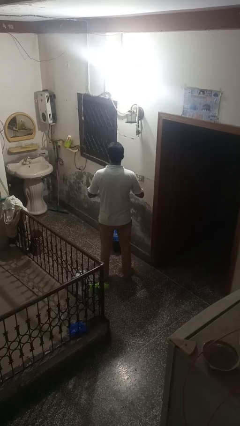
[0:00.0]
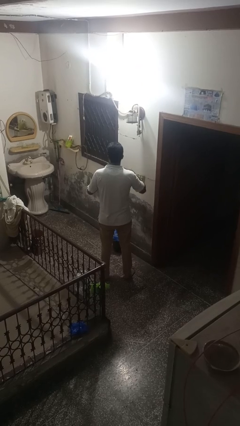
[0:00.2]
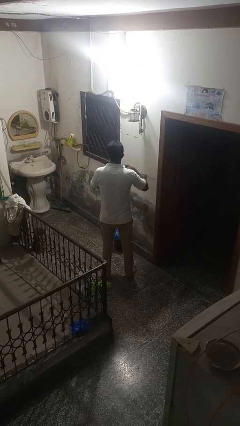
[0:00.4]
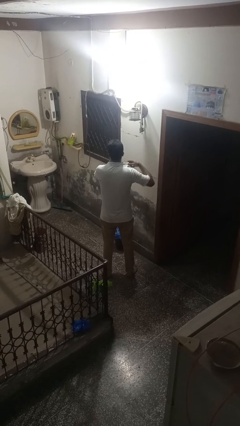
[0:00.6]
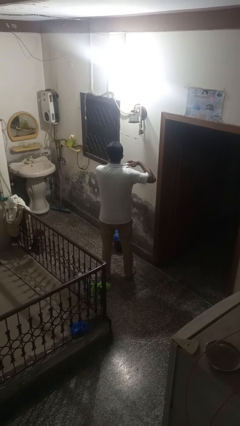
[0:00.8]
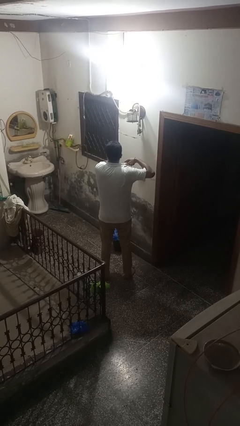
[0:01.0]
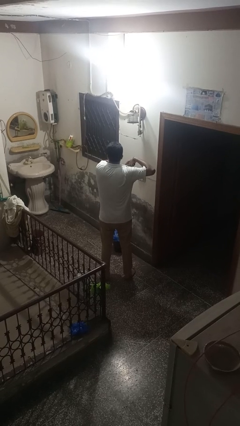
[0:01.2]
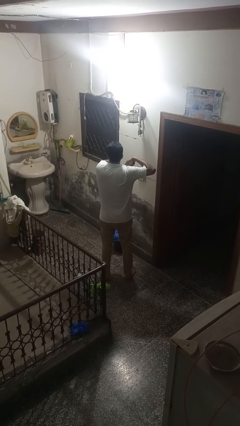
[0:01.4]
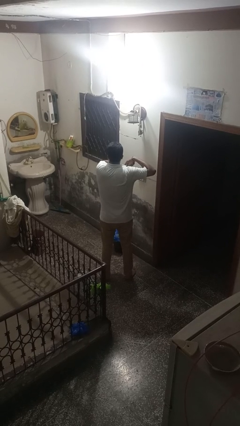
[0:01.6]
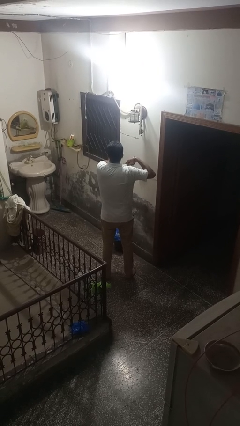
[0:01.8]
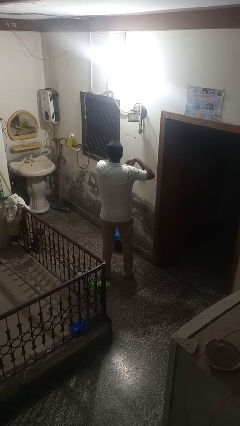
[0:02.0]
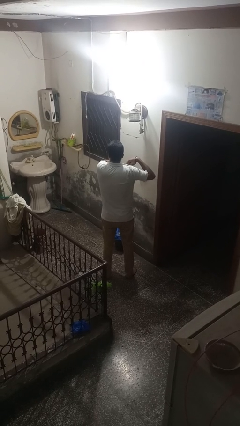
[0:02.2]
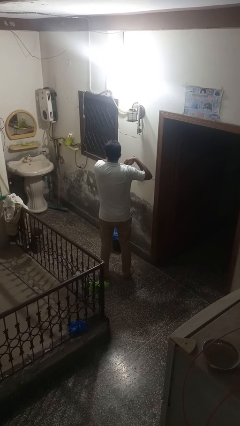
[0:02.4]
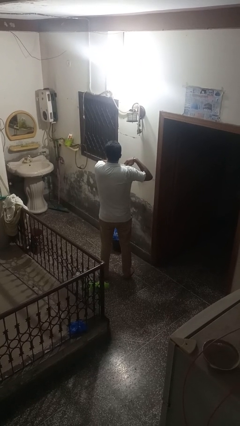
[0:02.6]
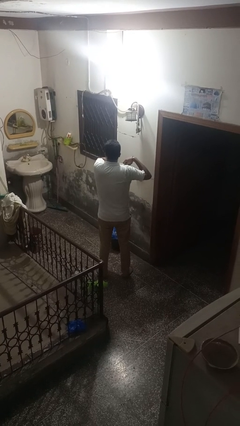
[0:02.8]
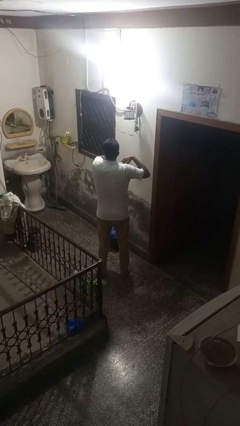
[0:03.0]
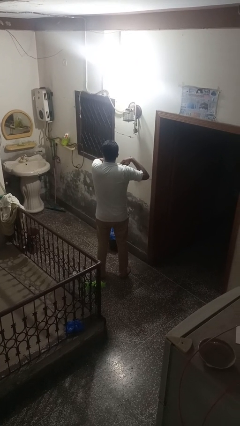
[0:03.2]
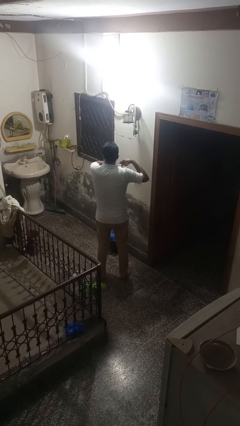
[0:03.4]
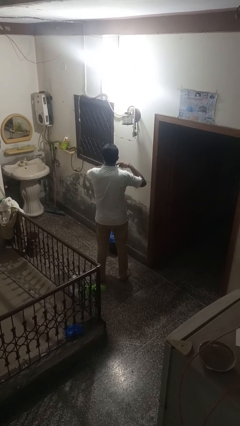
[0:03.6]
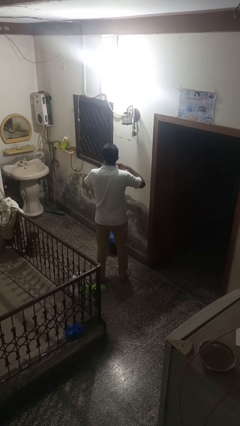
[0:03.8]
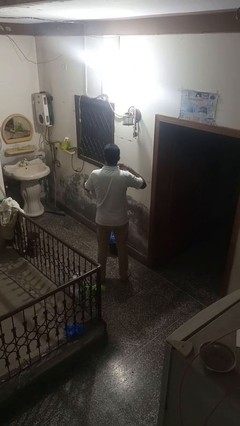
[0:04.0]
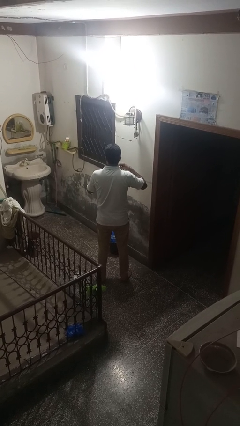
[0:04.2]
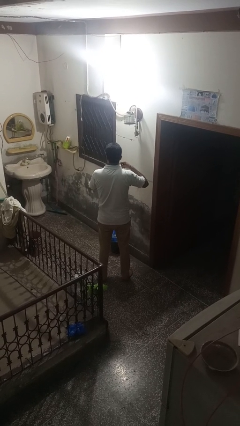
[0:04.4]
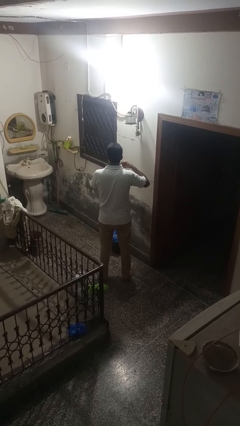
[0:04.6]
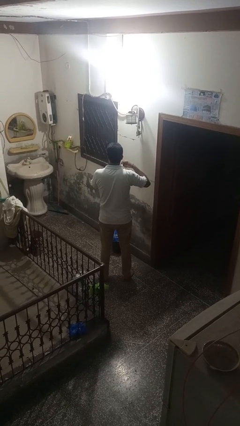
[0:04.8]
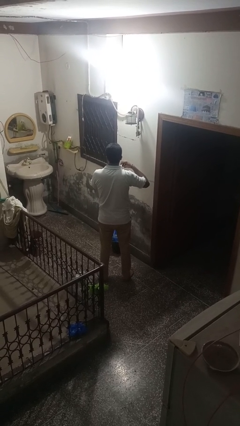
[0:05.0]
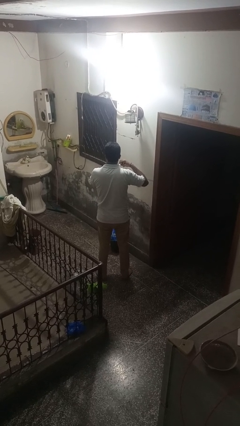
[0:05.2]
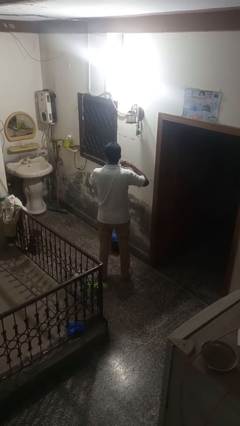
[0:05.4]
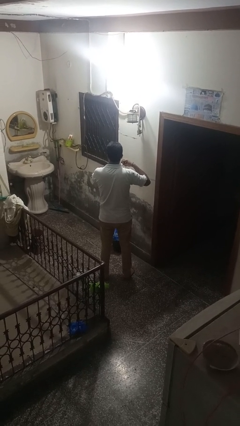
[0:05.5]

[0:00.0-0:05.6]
person applies deodorant

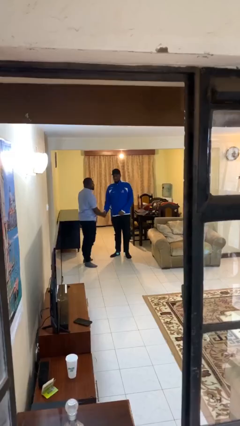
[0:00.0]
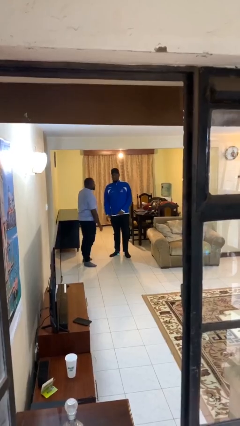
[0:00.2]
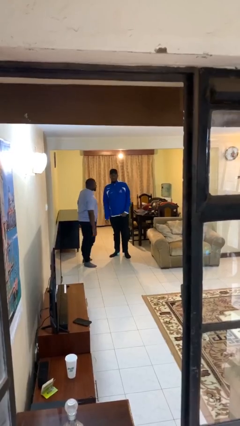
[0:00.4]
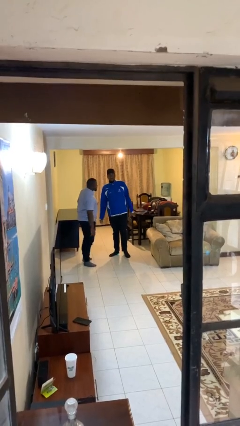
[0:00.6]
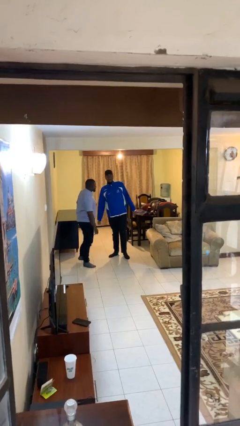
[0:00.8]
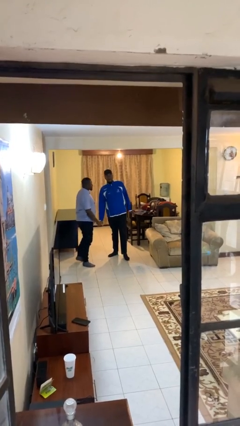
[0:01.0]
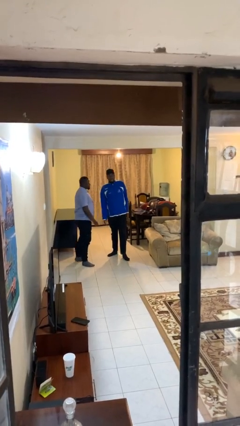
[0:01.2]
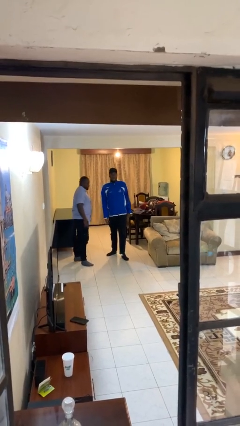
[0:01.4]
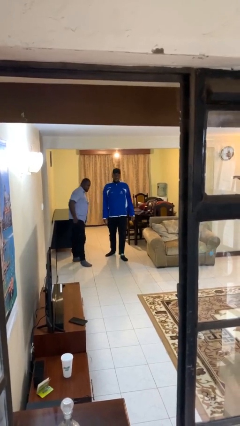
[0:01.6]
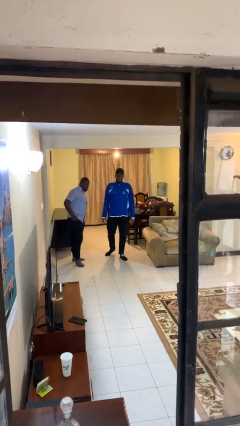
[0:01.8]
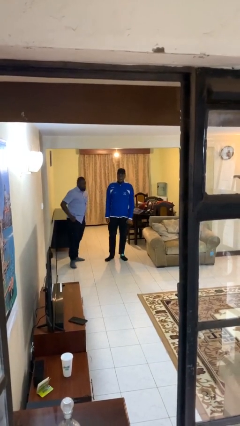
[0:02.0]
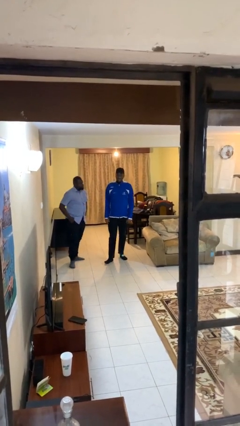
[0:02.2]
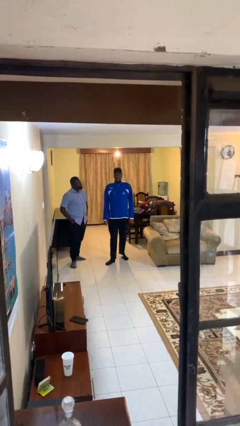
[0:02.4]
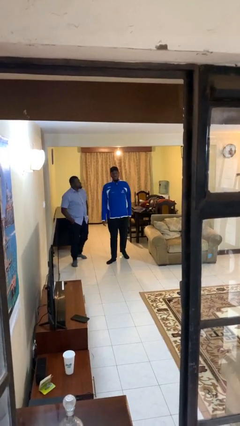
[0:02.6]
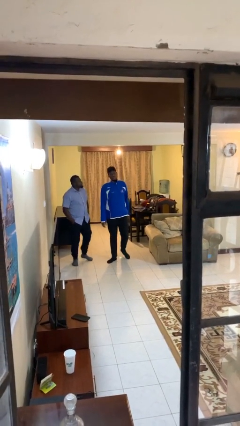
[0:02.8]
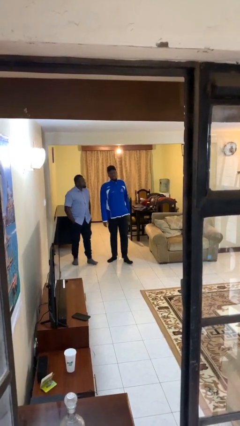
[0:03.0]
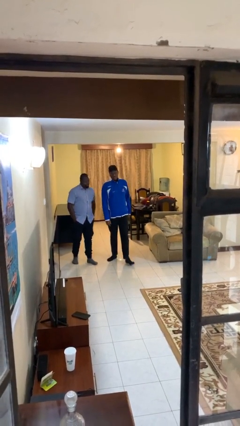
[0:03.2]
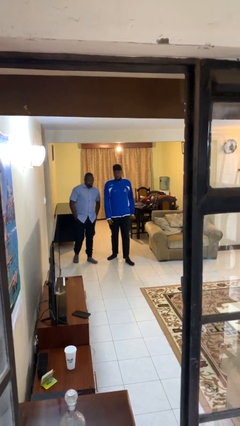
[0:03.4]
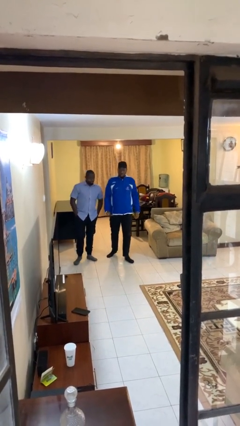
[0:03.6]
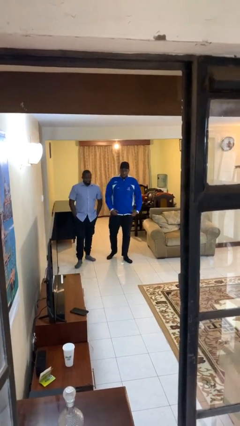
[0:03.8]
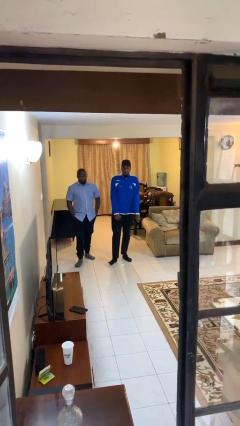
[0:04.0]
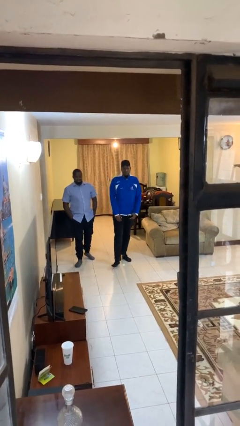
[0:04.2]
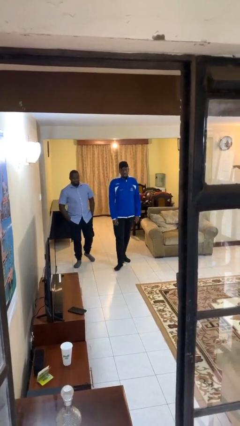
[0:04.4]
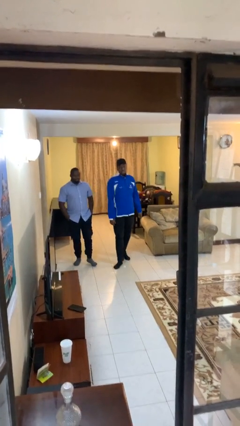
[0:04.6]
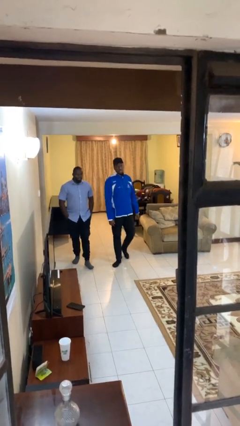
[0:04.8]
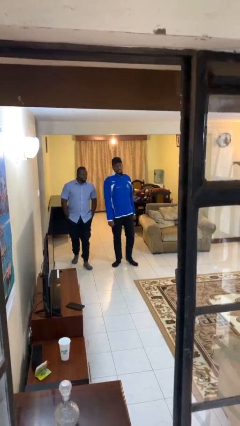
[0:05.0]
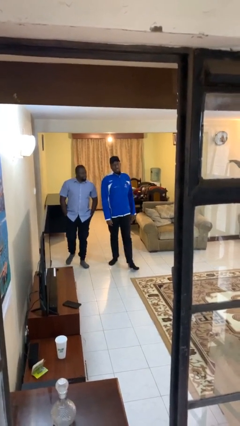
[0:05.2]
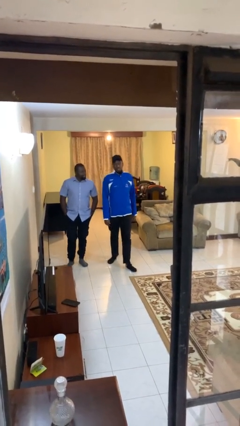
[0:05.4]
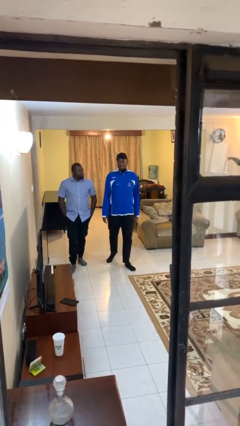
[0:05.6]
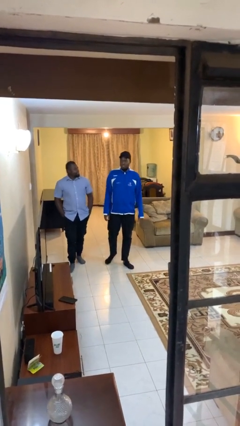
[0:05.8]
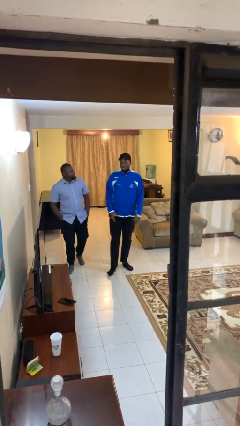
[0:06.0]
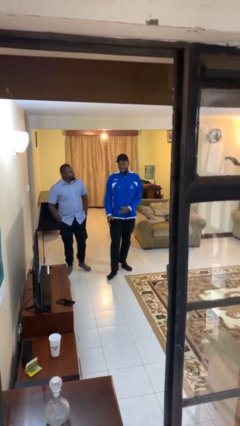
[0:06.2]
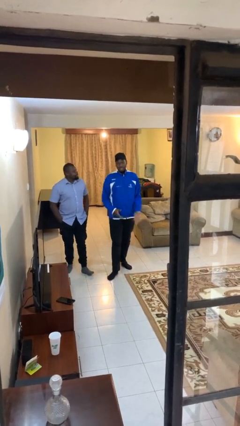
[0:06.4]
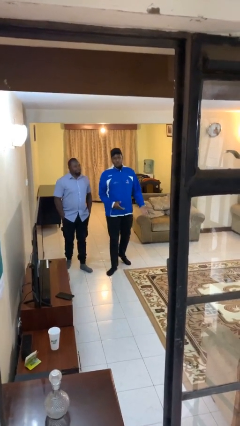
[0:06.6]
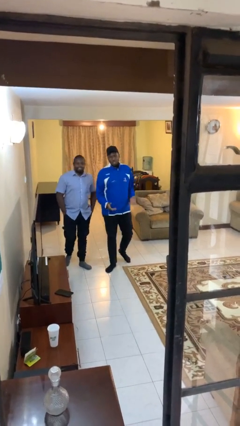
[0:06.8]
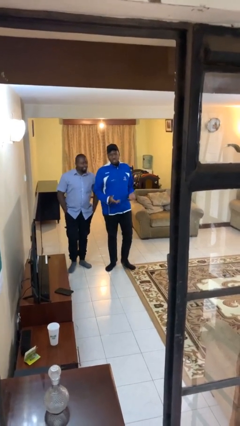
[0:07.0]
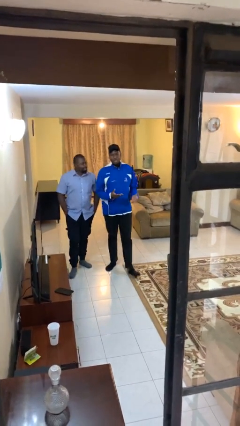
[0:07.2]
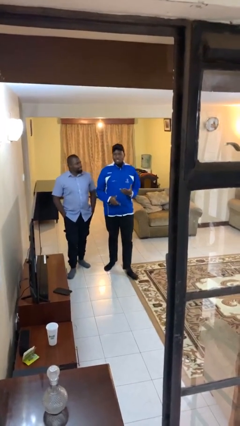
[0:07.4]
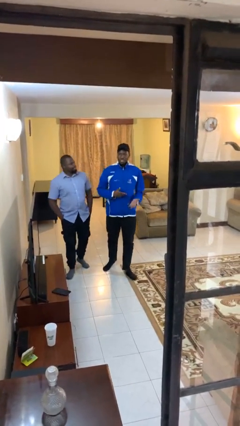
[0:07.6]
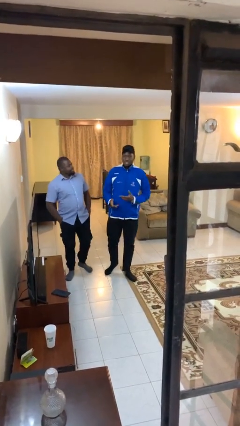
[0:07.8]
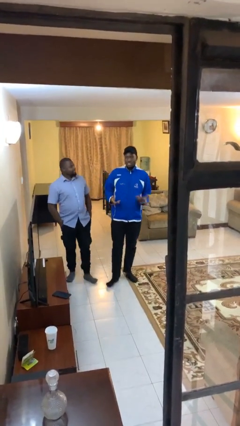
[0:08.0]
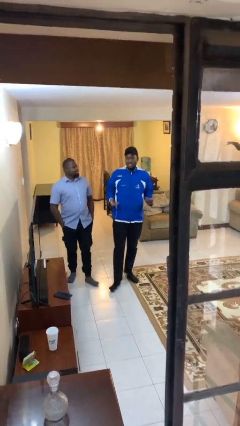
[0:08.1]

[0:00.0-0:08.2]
person talks to person

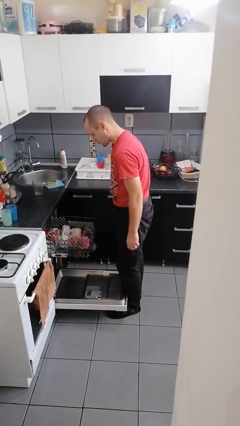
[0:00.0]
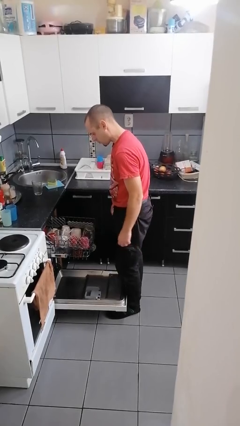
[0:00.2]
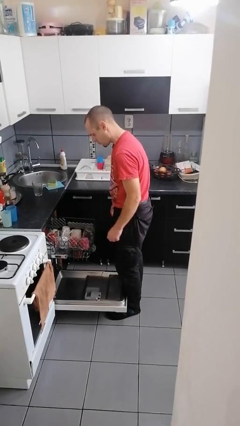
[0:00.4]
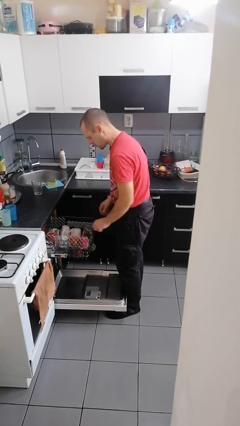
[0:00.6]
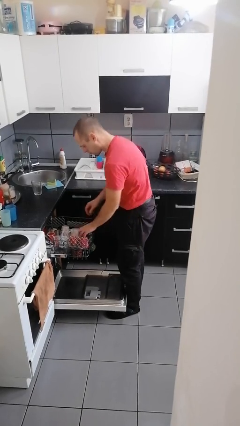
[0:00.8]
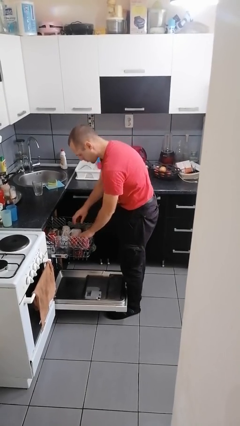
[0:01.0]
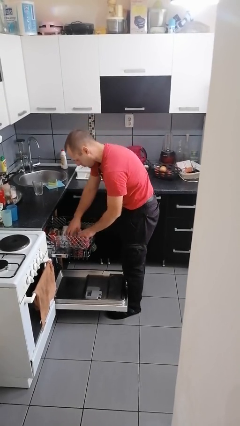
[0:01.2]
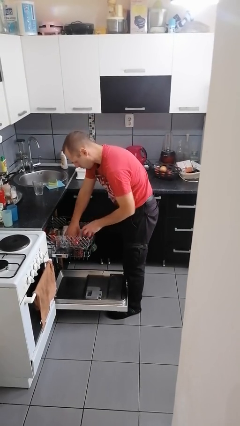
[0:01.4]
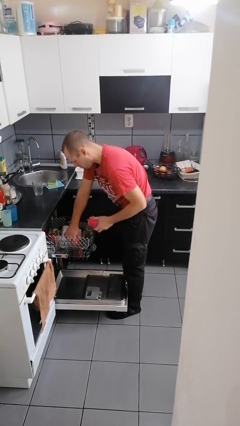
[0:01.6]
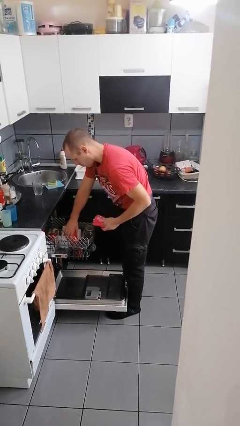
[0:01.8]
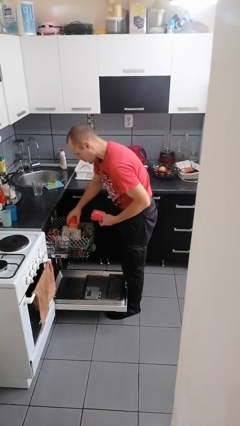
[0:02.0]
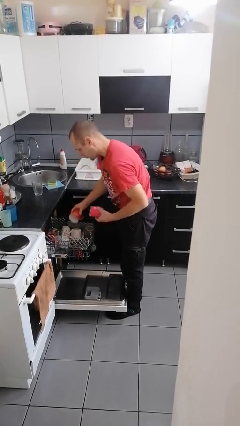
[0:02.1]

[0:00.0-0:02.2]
person unloads dishwasher

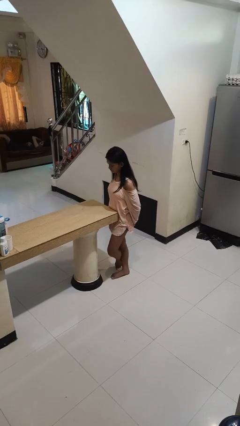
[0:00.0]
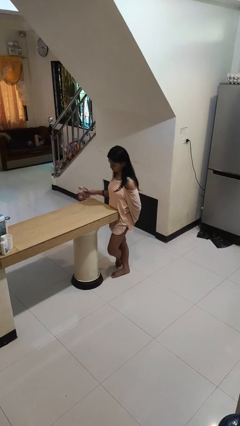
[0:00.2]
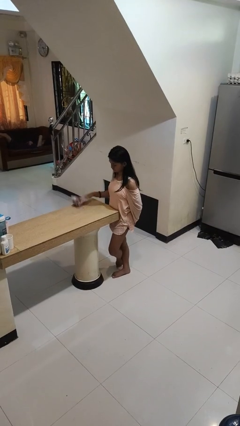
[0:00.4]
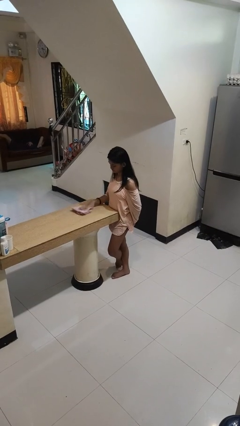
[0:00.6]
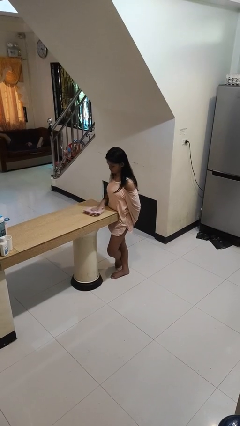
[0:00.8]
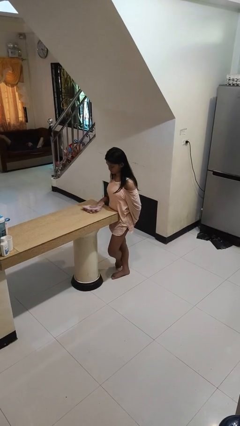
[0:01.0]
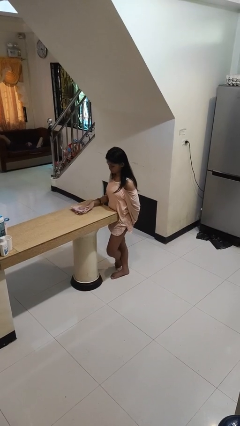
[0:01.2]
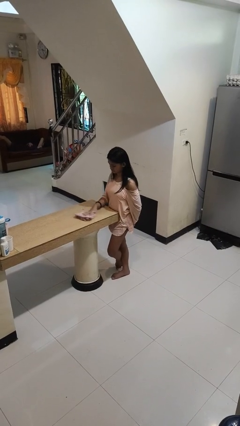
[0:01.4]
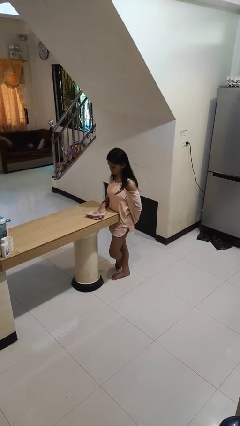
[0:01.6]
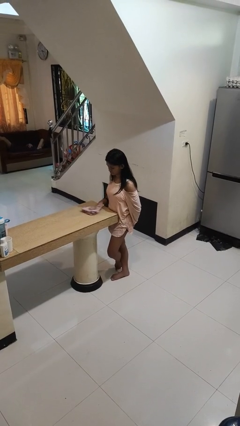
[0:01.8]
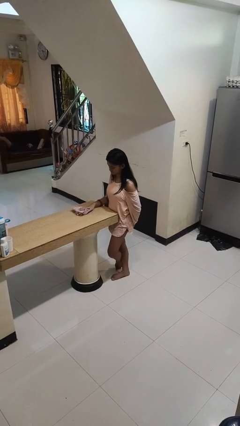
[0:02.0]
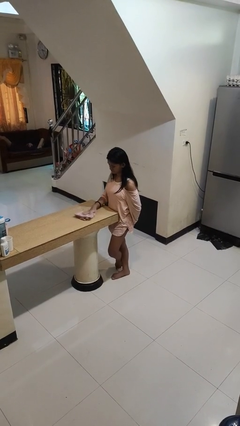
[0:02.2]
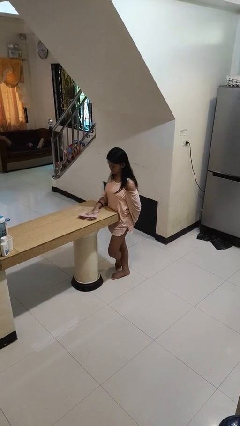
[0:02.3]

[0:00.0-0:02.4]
person cleans table with rag
